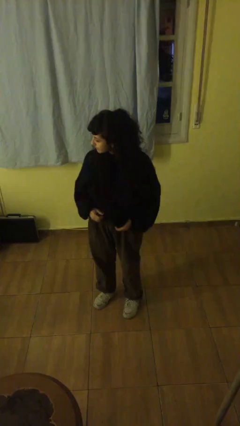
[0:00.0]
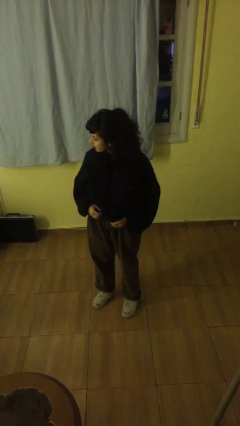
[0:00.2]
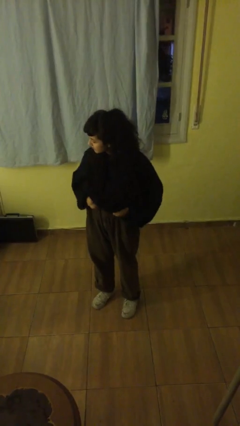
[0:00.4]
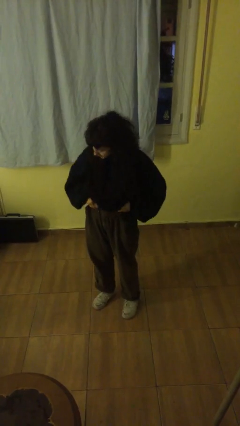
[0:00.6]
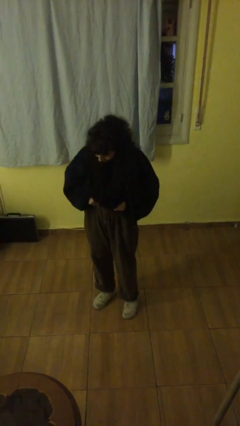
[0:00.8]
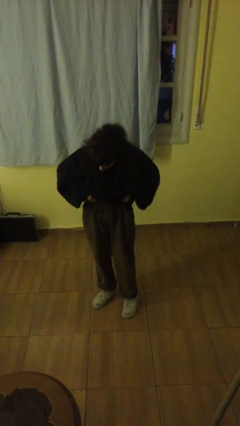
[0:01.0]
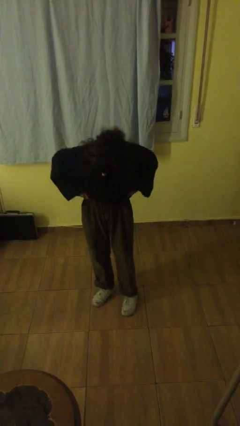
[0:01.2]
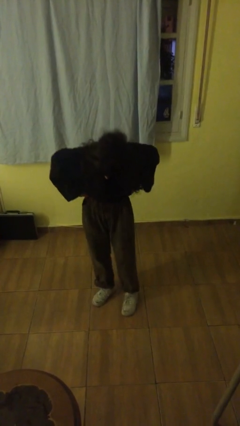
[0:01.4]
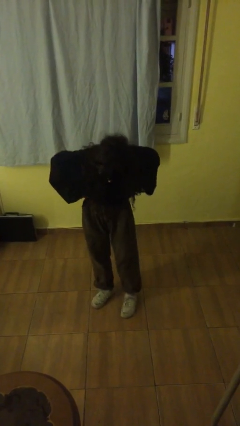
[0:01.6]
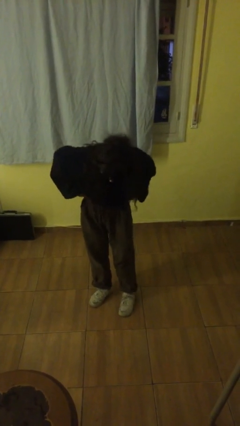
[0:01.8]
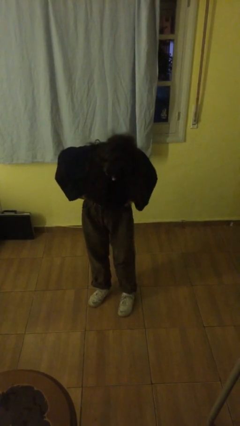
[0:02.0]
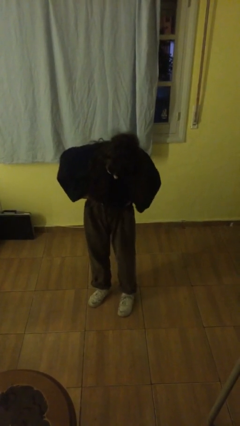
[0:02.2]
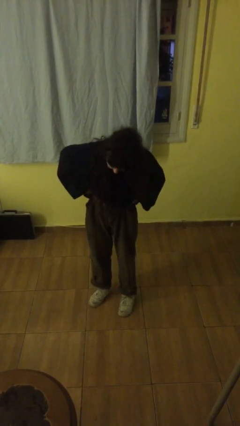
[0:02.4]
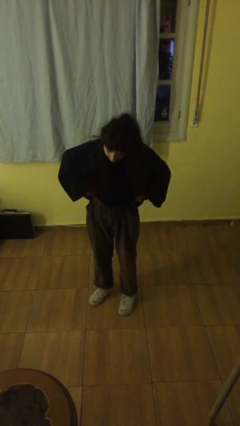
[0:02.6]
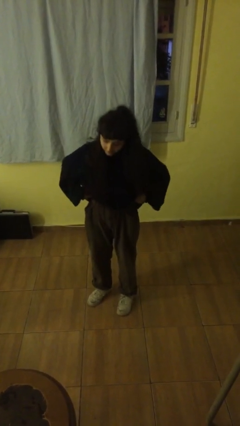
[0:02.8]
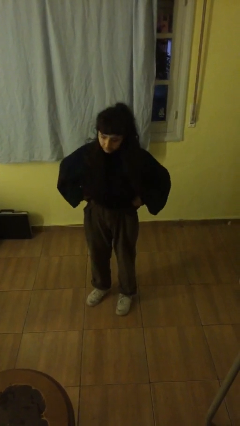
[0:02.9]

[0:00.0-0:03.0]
person hikes up pants

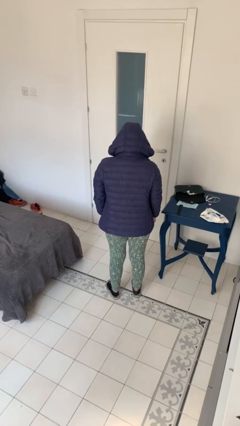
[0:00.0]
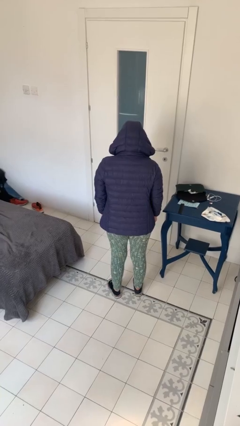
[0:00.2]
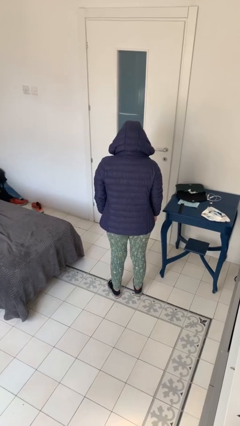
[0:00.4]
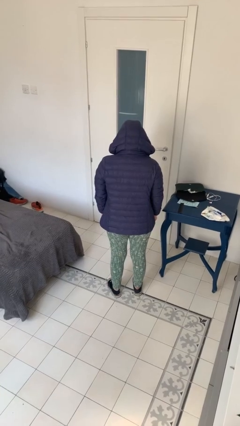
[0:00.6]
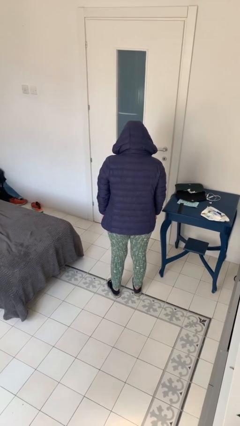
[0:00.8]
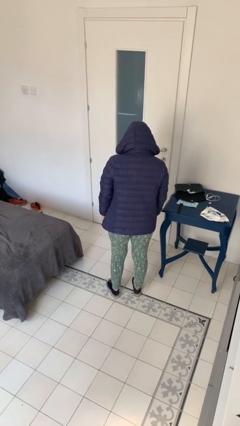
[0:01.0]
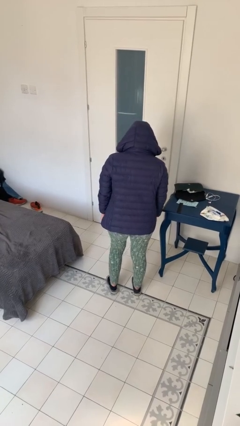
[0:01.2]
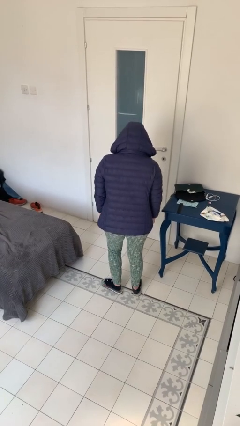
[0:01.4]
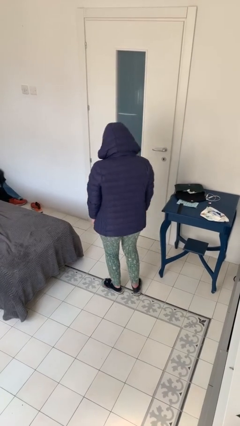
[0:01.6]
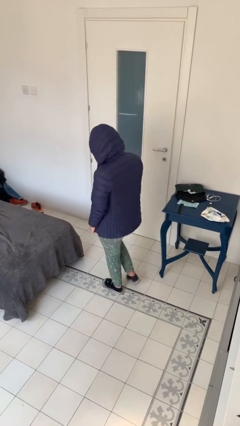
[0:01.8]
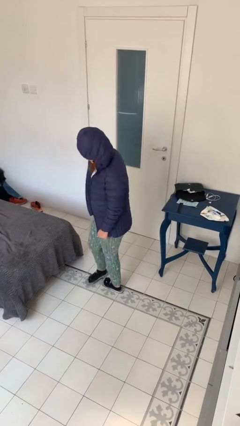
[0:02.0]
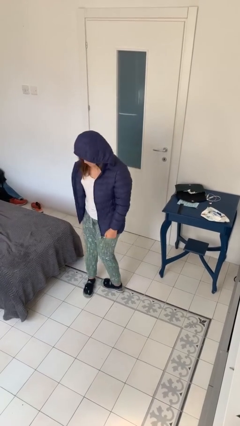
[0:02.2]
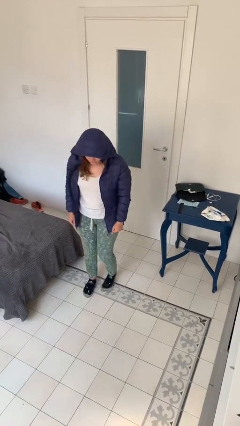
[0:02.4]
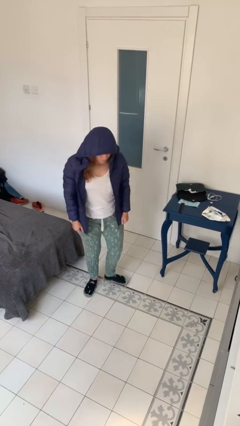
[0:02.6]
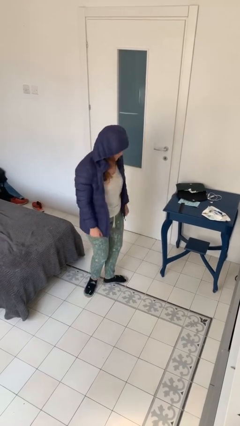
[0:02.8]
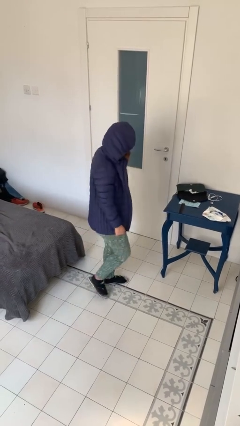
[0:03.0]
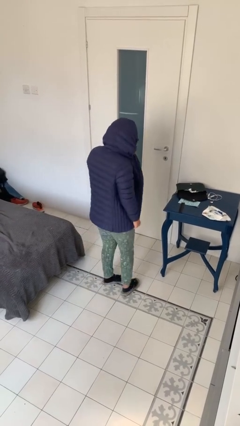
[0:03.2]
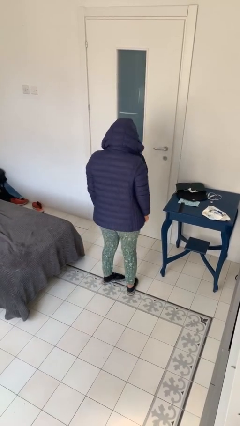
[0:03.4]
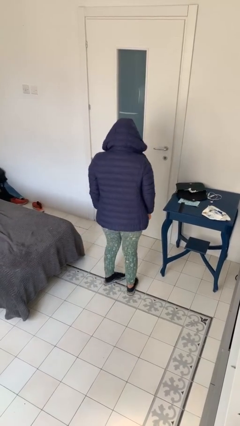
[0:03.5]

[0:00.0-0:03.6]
person twirls

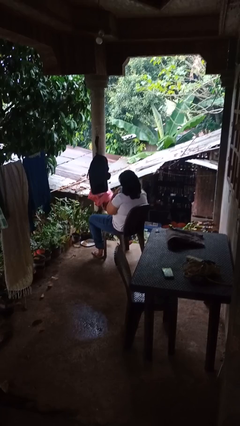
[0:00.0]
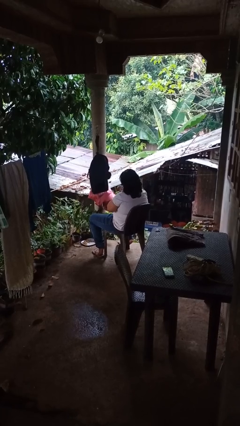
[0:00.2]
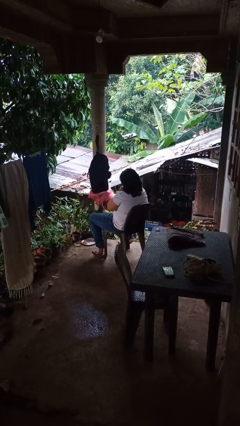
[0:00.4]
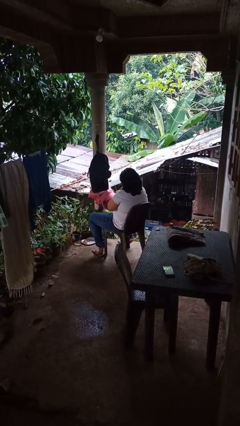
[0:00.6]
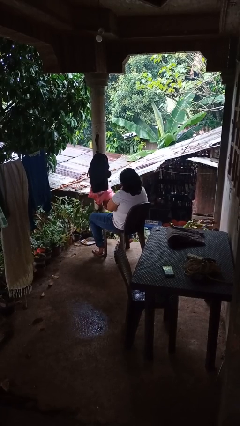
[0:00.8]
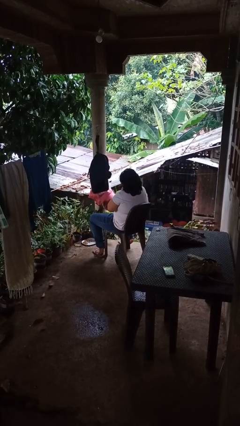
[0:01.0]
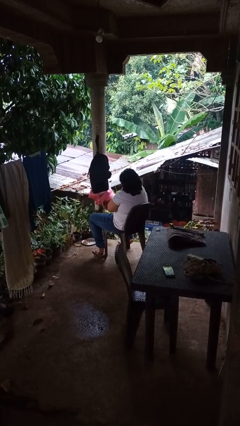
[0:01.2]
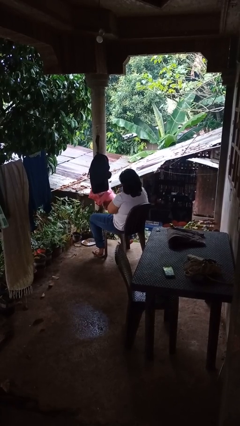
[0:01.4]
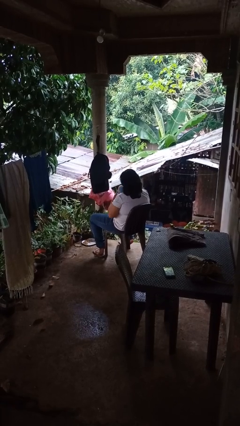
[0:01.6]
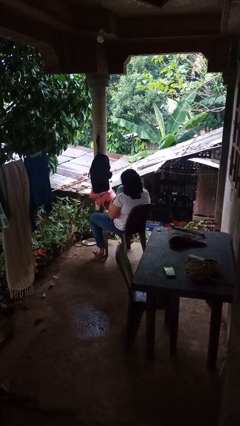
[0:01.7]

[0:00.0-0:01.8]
person hugs stuffed animal

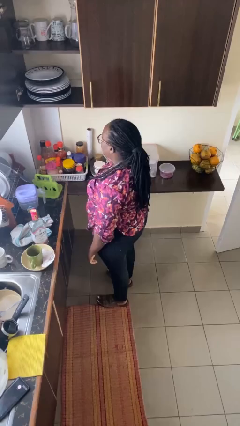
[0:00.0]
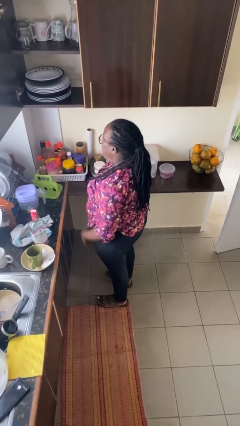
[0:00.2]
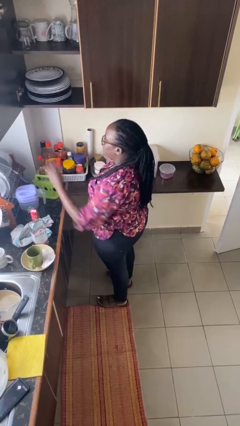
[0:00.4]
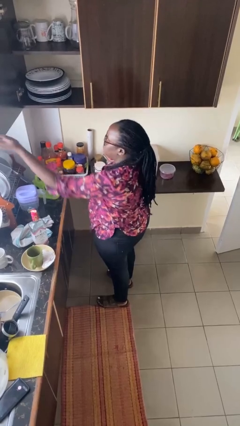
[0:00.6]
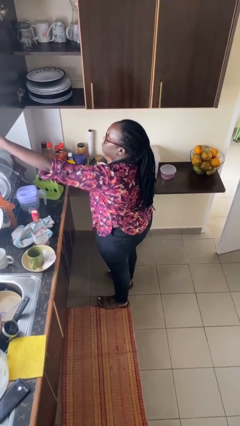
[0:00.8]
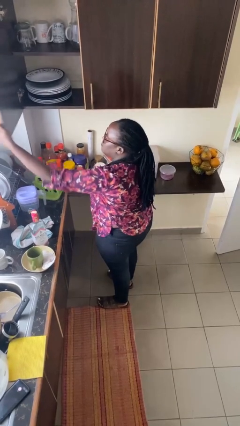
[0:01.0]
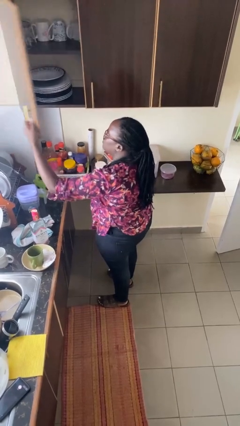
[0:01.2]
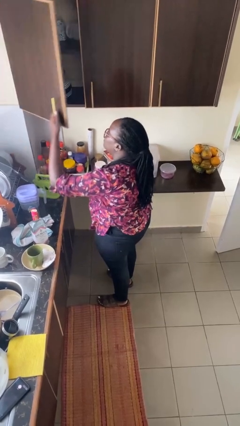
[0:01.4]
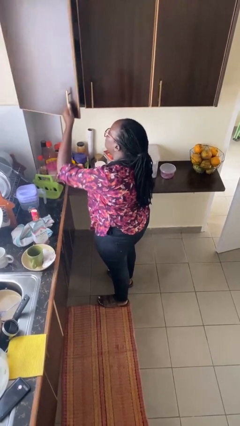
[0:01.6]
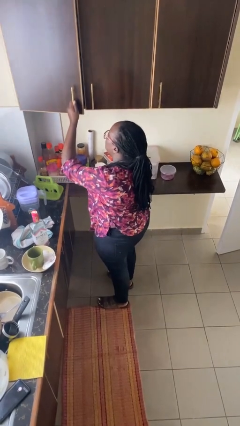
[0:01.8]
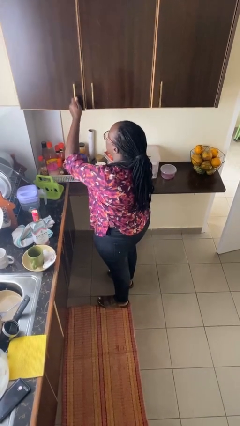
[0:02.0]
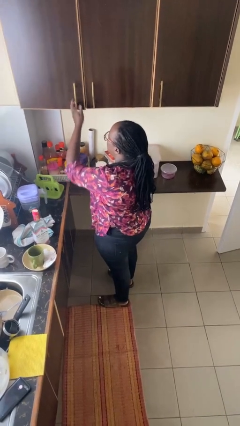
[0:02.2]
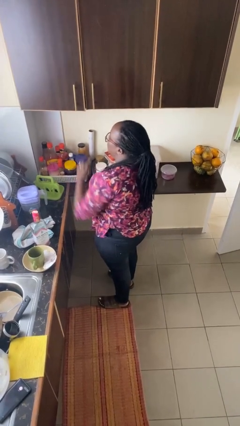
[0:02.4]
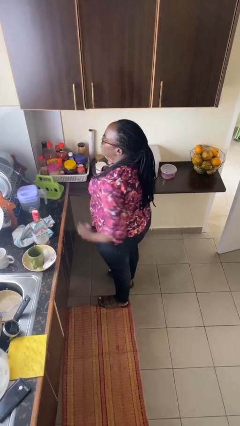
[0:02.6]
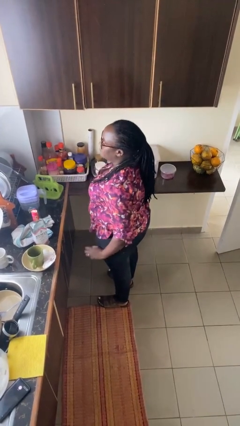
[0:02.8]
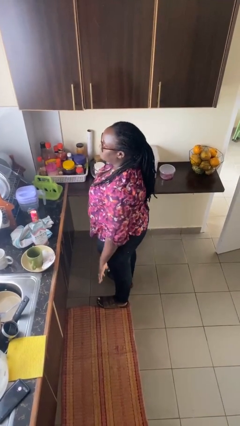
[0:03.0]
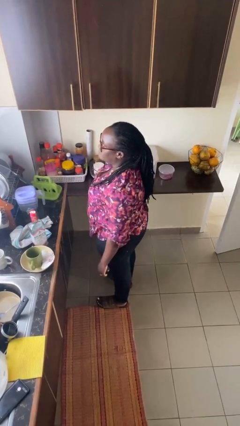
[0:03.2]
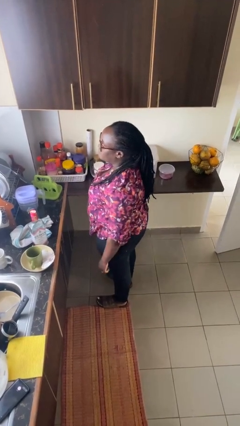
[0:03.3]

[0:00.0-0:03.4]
person closes cabinet

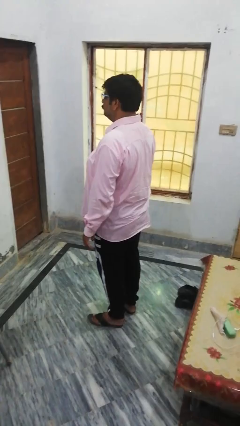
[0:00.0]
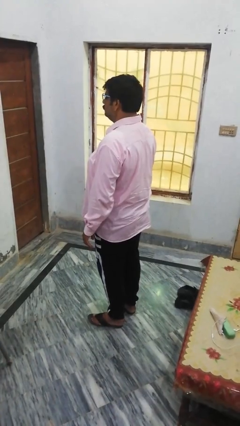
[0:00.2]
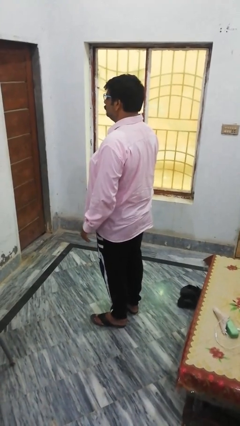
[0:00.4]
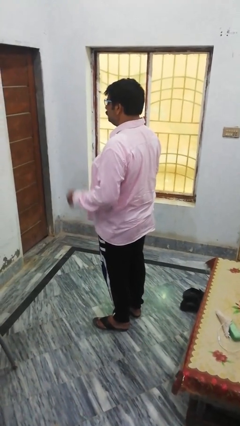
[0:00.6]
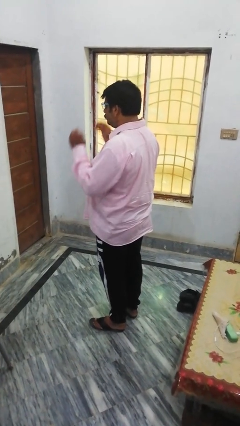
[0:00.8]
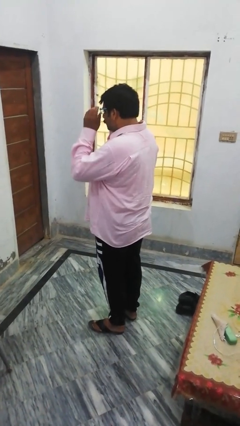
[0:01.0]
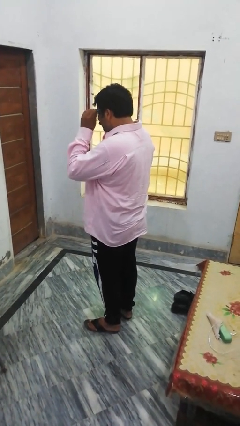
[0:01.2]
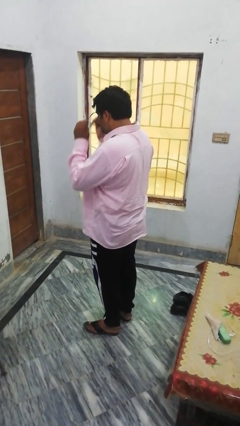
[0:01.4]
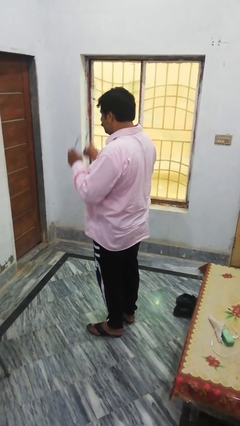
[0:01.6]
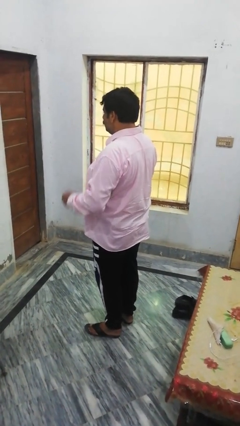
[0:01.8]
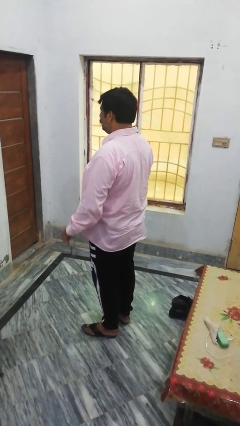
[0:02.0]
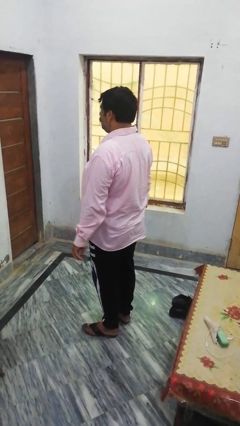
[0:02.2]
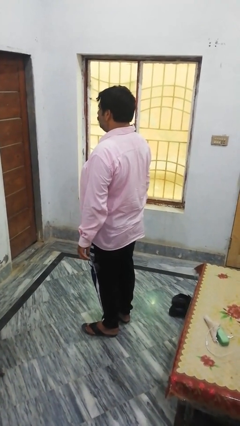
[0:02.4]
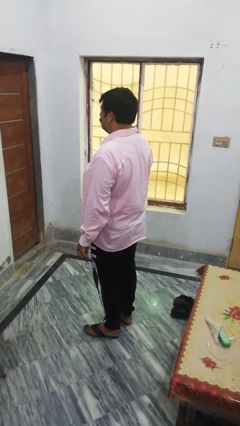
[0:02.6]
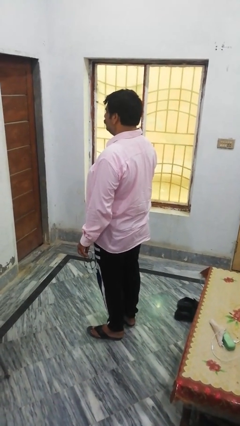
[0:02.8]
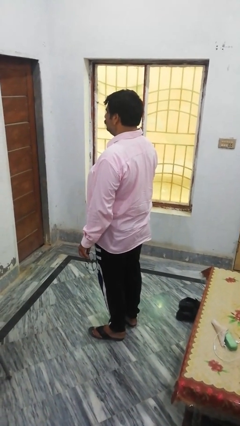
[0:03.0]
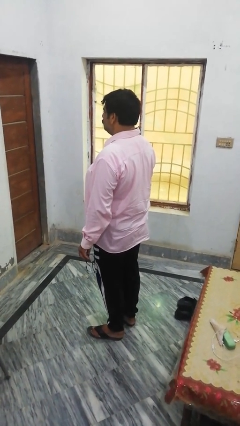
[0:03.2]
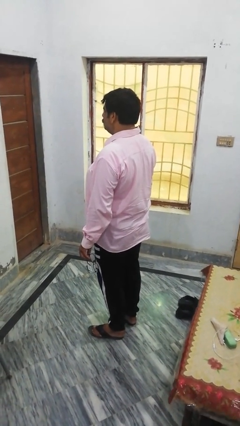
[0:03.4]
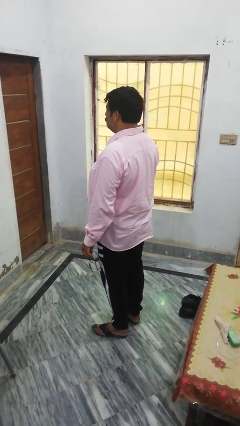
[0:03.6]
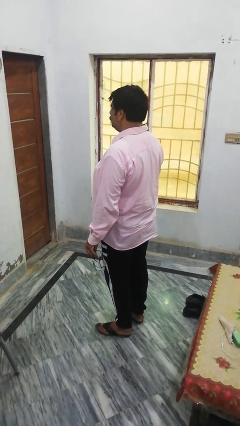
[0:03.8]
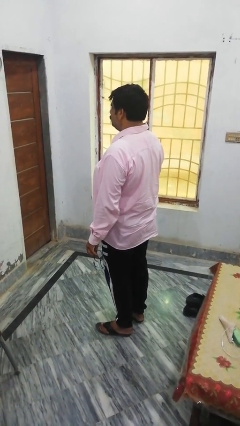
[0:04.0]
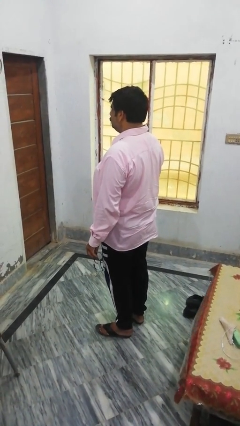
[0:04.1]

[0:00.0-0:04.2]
person takes off glasses

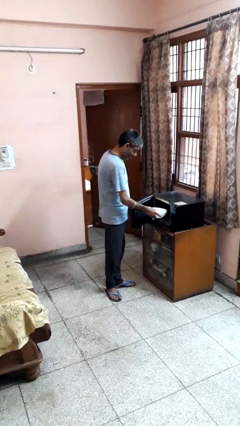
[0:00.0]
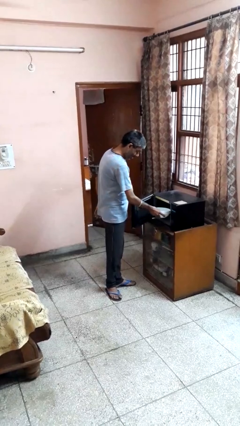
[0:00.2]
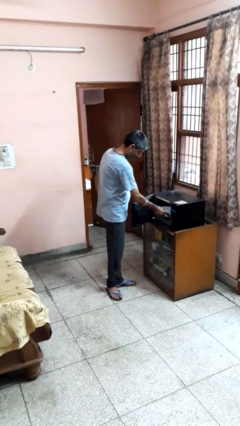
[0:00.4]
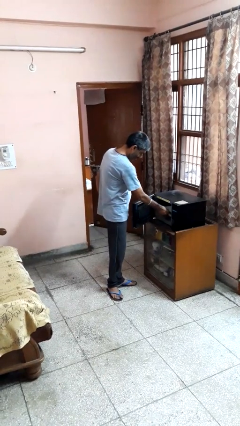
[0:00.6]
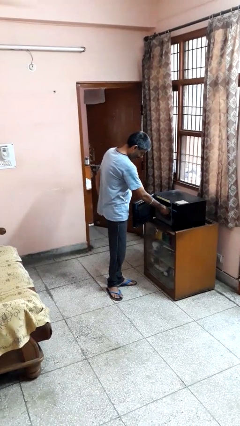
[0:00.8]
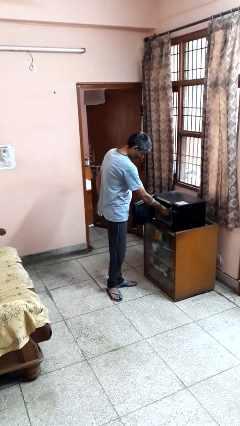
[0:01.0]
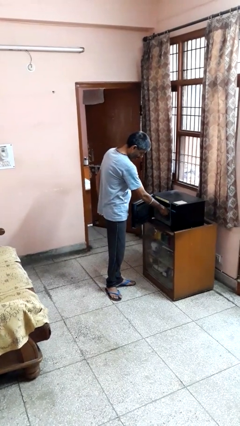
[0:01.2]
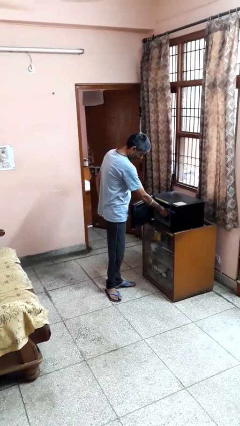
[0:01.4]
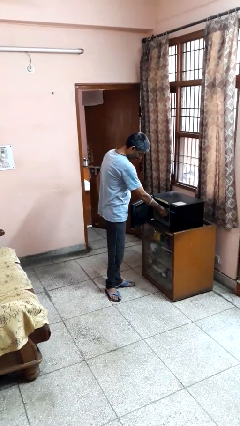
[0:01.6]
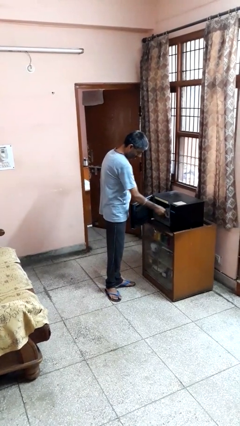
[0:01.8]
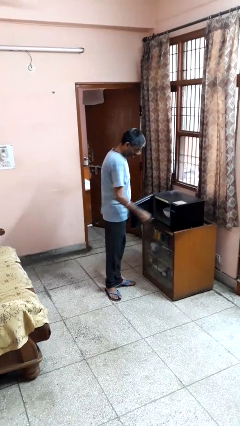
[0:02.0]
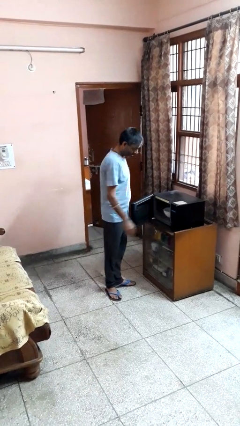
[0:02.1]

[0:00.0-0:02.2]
person puts object into microwave
